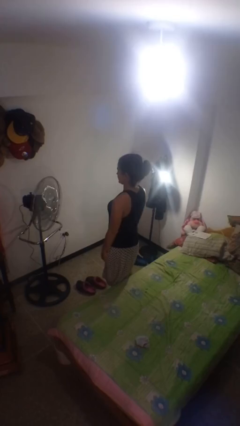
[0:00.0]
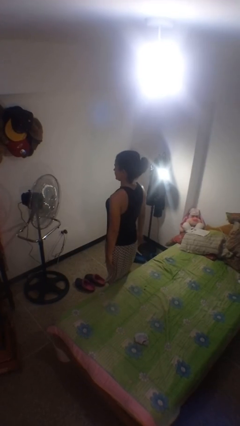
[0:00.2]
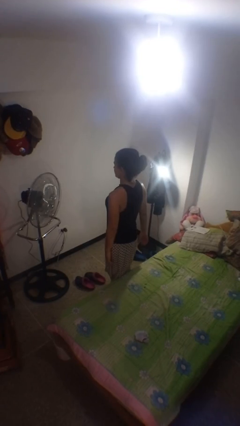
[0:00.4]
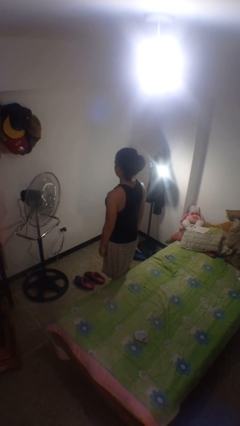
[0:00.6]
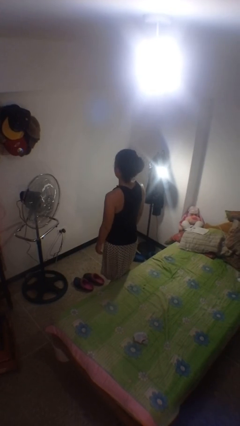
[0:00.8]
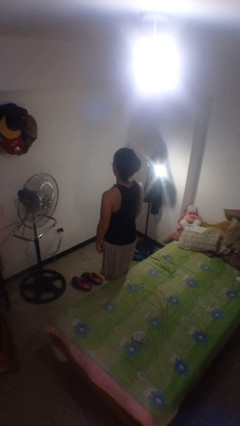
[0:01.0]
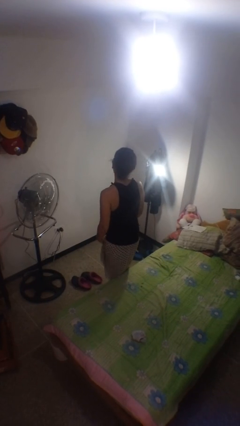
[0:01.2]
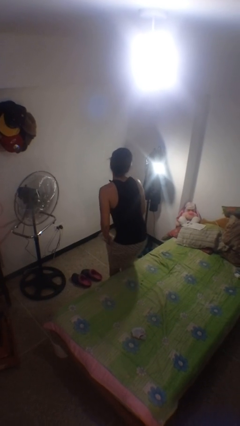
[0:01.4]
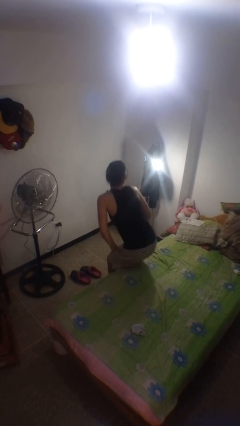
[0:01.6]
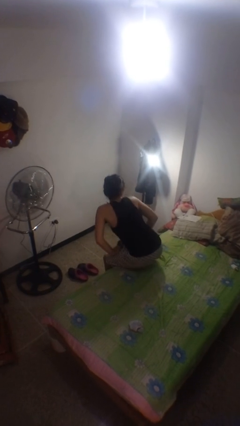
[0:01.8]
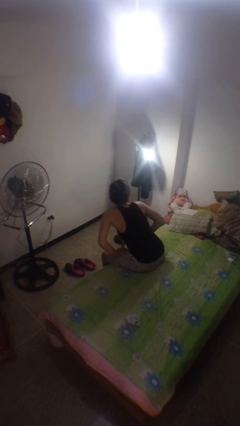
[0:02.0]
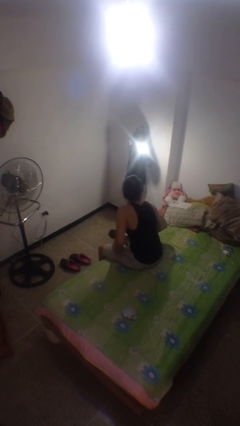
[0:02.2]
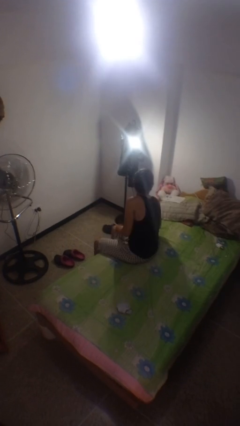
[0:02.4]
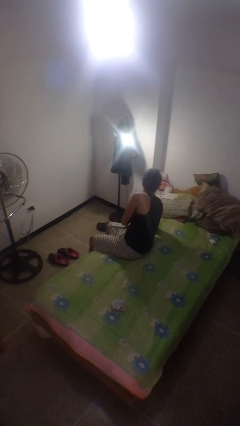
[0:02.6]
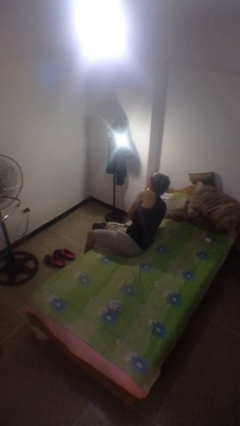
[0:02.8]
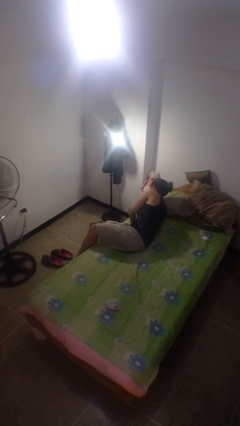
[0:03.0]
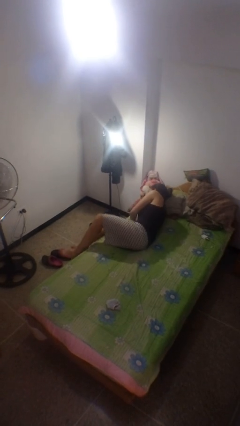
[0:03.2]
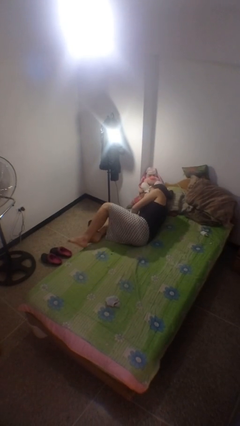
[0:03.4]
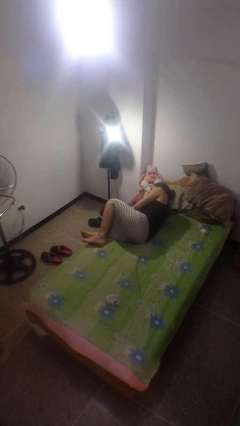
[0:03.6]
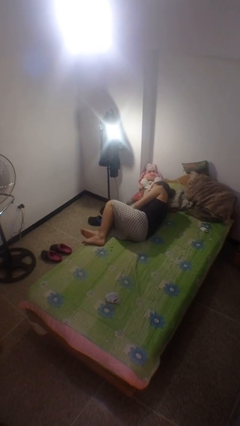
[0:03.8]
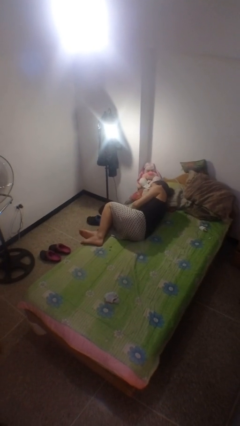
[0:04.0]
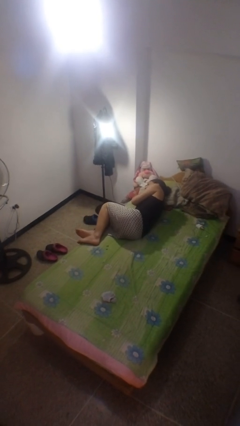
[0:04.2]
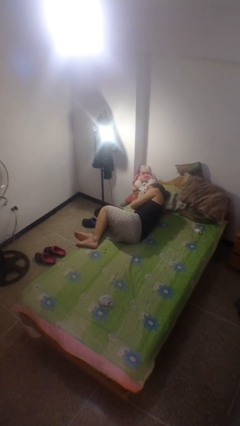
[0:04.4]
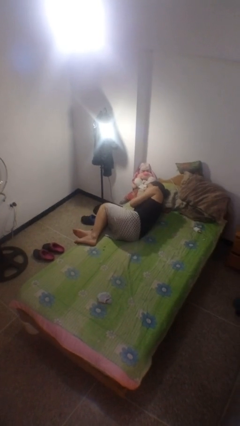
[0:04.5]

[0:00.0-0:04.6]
person lies down on bed

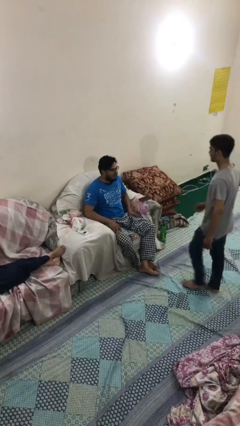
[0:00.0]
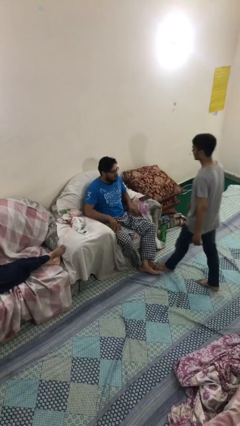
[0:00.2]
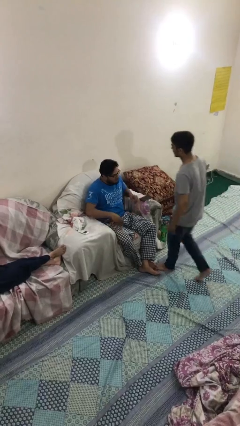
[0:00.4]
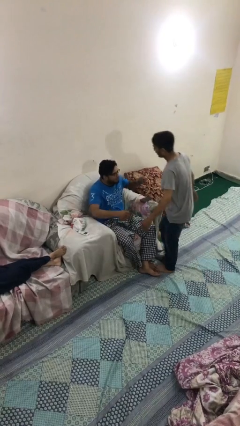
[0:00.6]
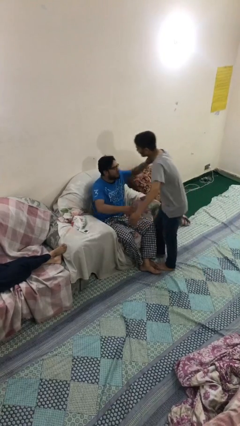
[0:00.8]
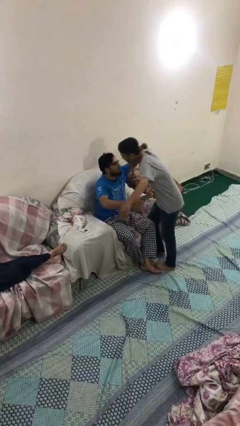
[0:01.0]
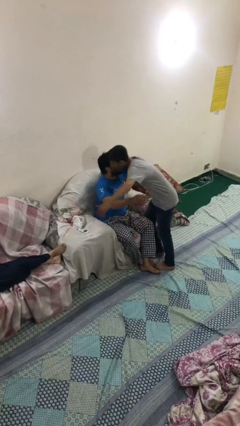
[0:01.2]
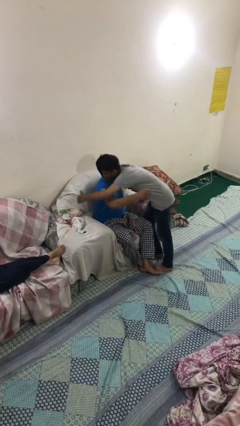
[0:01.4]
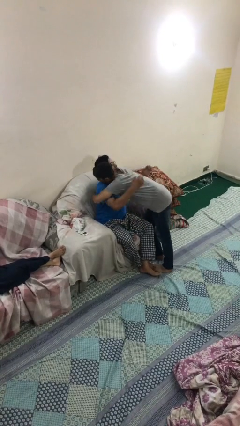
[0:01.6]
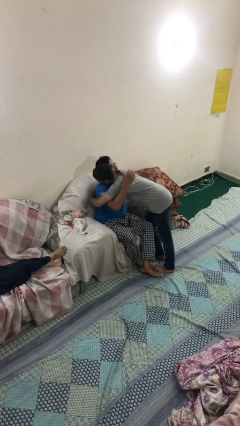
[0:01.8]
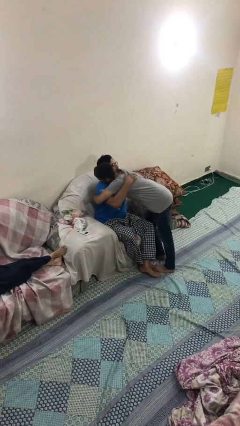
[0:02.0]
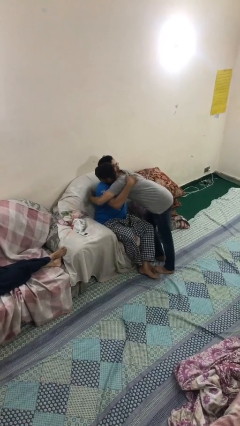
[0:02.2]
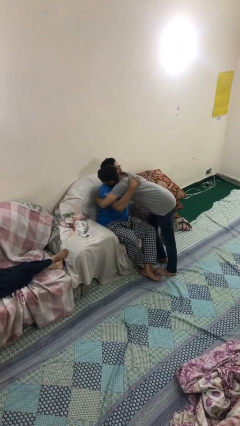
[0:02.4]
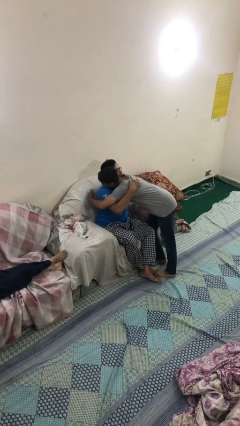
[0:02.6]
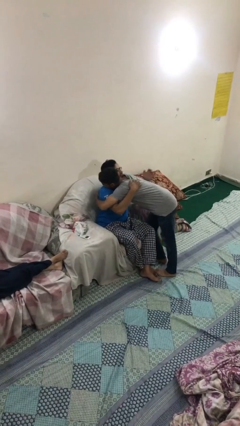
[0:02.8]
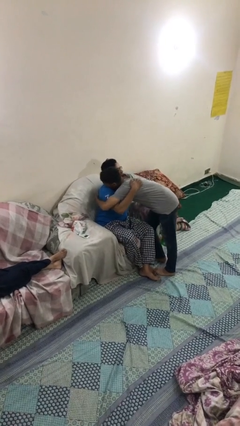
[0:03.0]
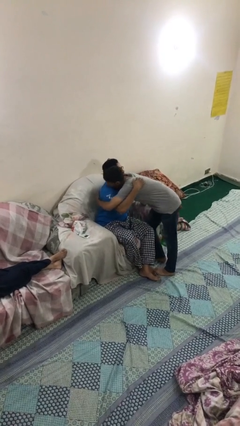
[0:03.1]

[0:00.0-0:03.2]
person embraces person

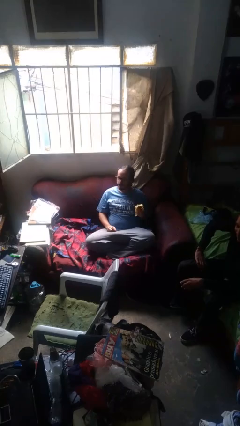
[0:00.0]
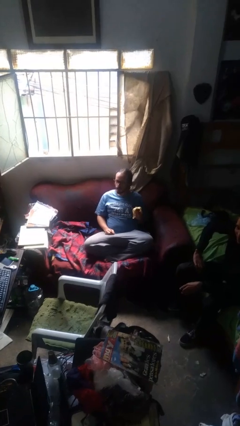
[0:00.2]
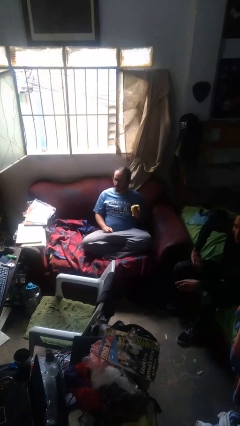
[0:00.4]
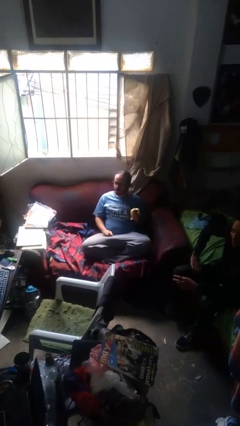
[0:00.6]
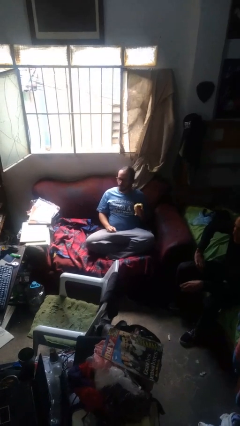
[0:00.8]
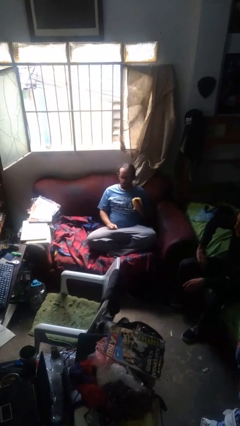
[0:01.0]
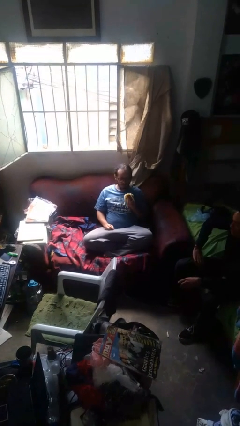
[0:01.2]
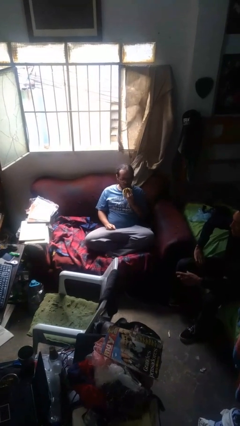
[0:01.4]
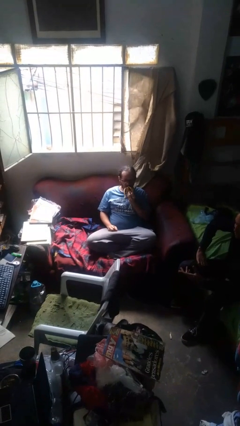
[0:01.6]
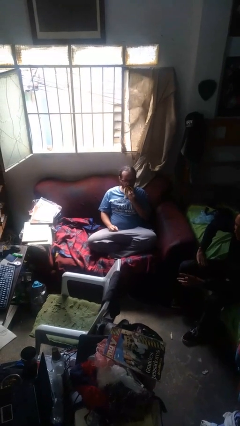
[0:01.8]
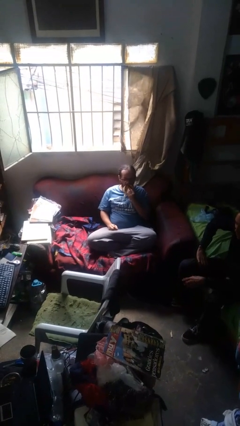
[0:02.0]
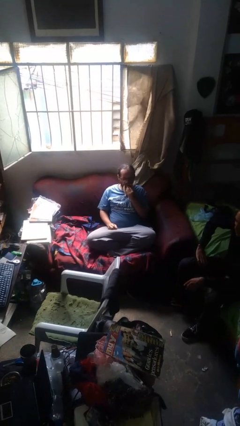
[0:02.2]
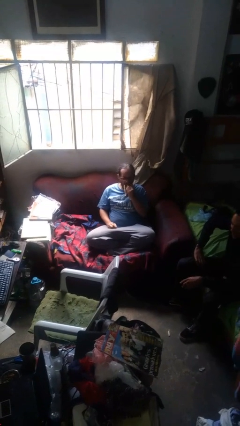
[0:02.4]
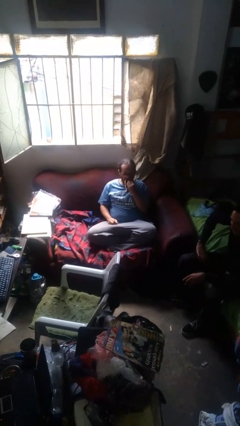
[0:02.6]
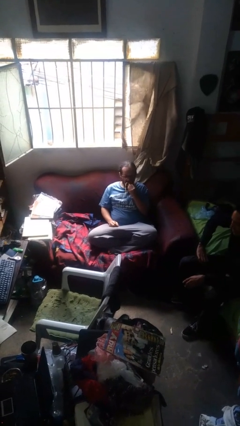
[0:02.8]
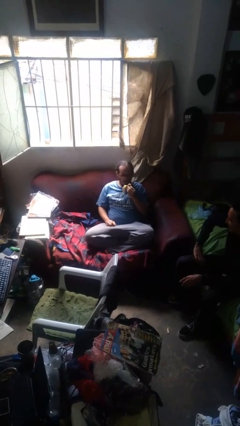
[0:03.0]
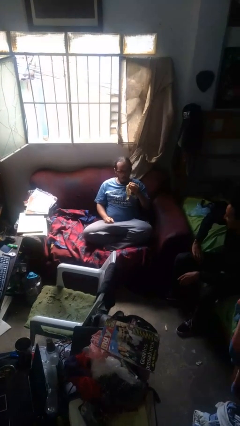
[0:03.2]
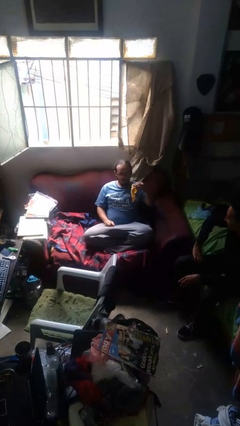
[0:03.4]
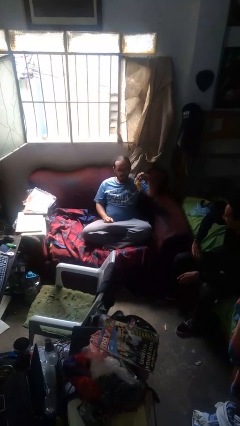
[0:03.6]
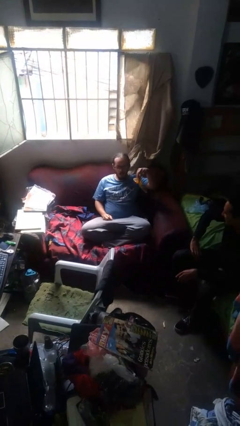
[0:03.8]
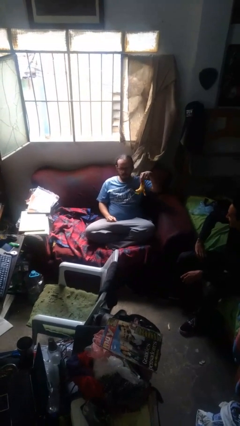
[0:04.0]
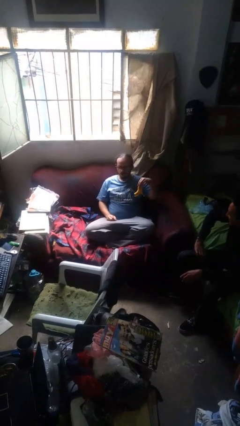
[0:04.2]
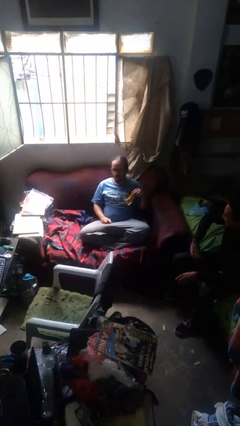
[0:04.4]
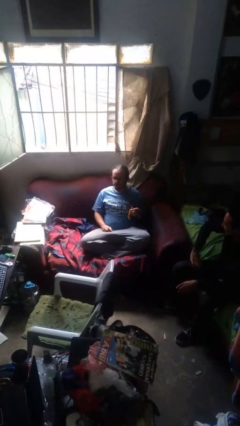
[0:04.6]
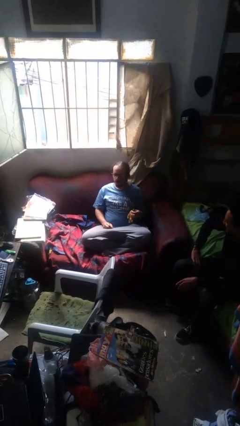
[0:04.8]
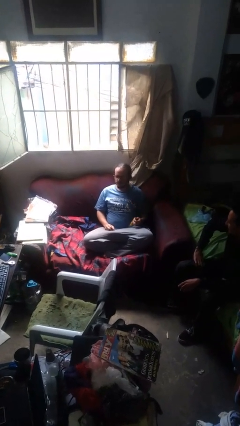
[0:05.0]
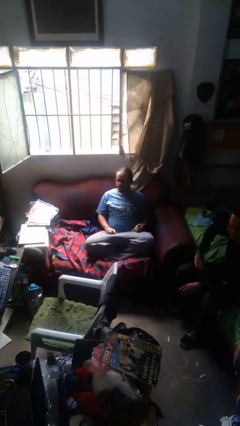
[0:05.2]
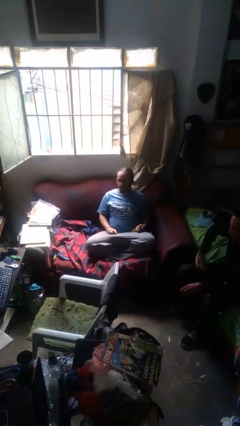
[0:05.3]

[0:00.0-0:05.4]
person eats banana

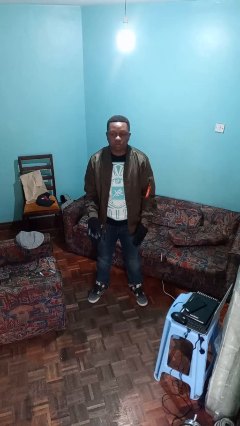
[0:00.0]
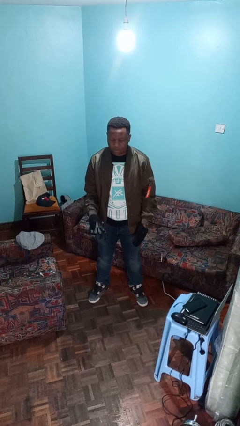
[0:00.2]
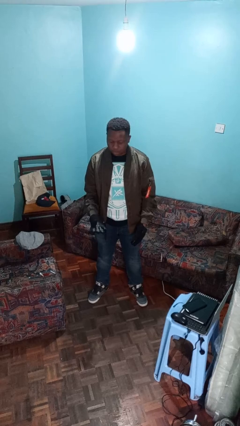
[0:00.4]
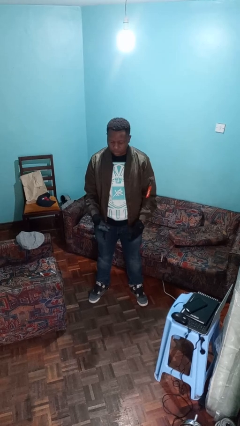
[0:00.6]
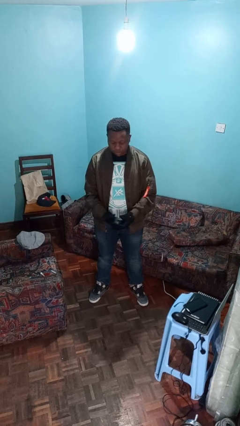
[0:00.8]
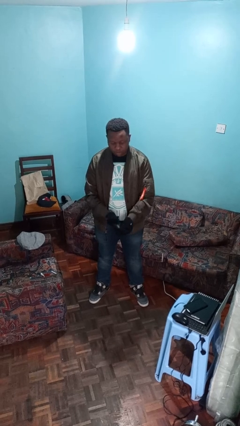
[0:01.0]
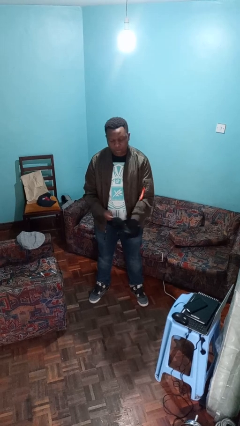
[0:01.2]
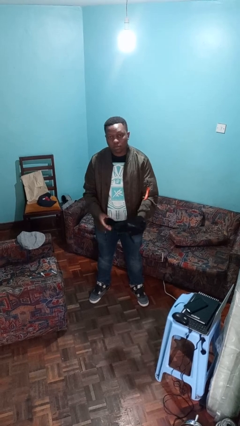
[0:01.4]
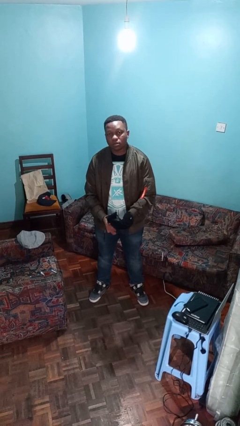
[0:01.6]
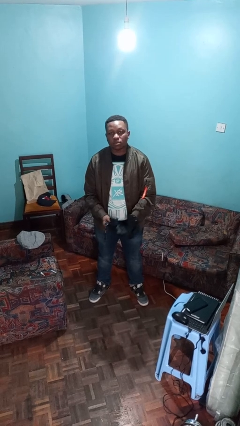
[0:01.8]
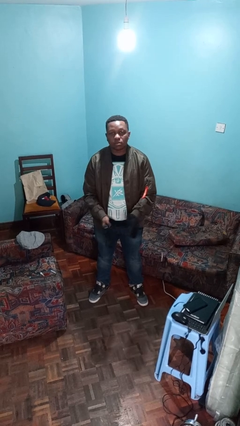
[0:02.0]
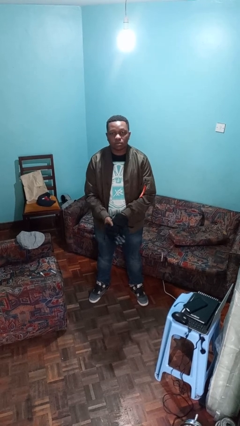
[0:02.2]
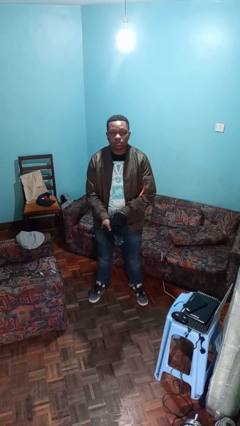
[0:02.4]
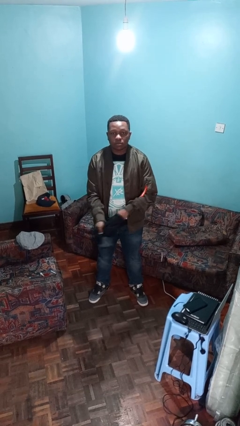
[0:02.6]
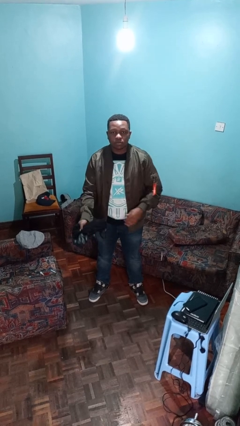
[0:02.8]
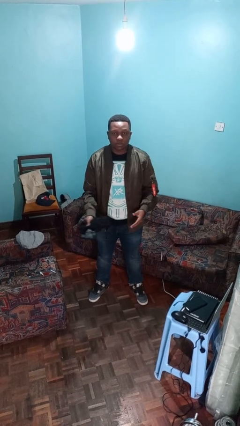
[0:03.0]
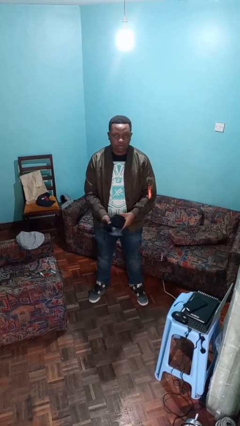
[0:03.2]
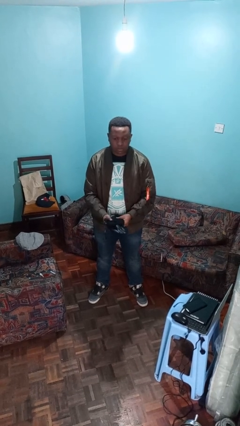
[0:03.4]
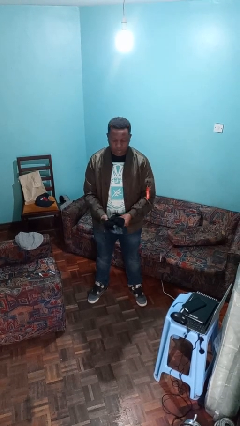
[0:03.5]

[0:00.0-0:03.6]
person takes off gloves

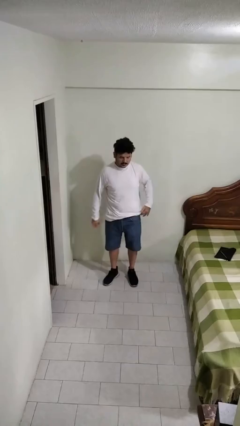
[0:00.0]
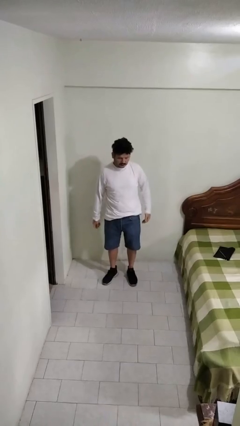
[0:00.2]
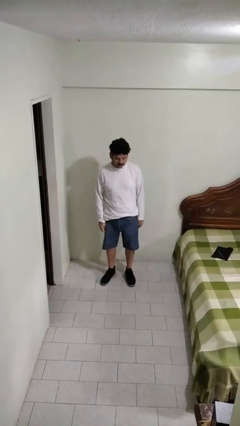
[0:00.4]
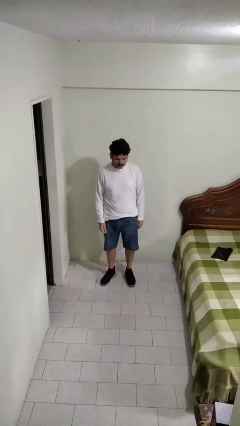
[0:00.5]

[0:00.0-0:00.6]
person untucks shirt
